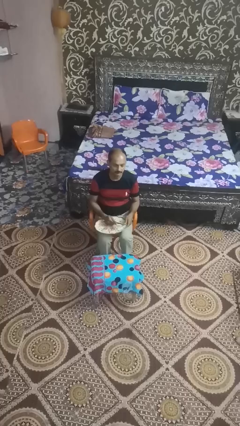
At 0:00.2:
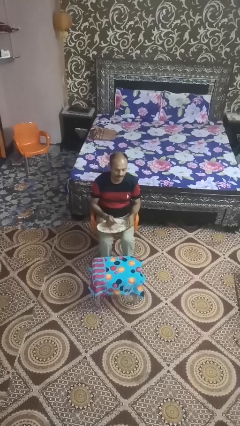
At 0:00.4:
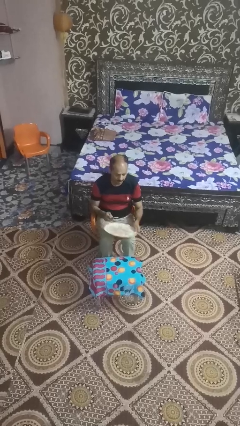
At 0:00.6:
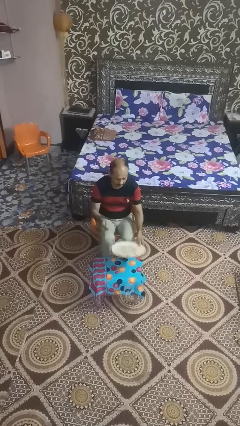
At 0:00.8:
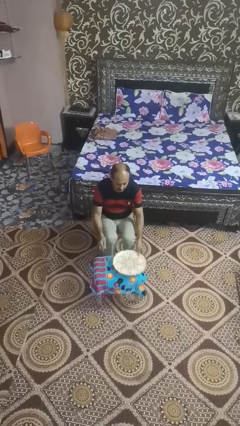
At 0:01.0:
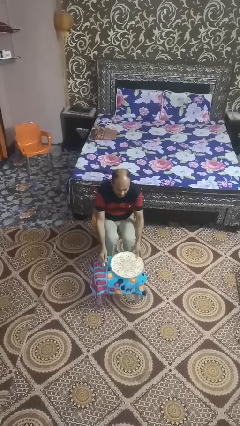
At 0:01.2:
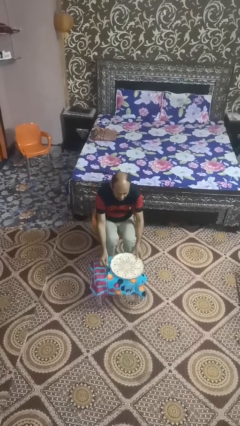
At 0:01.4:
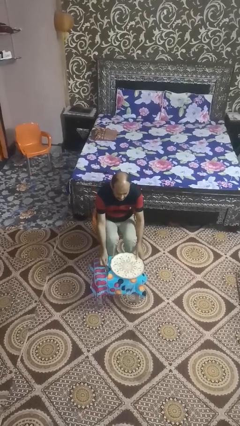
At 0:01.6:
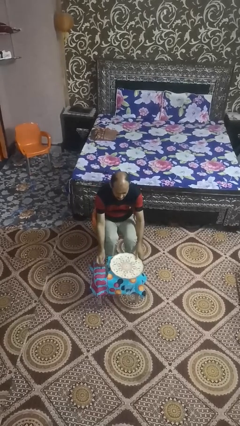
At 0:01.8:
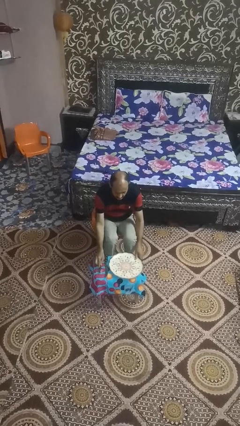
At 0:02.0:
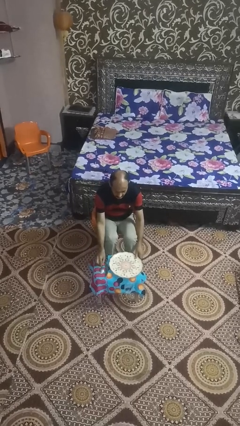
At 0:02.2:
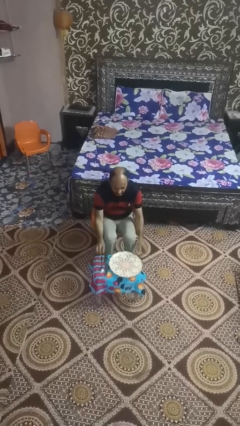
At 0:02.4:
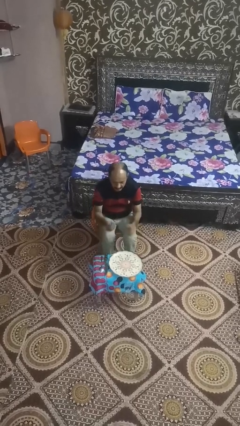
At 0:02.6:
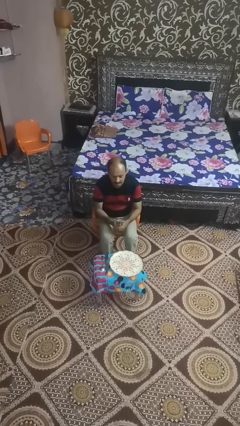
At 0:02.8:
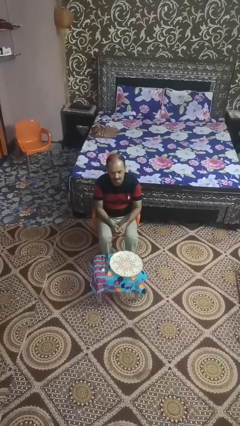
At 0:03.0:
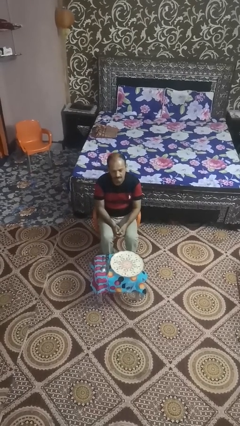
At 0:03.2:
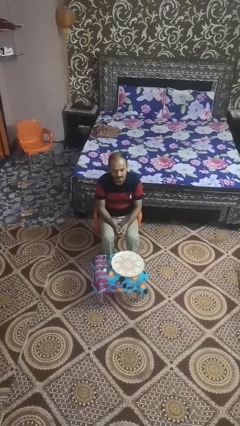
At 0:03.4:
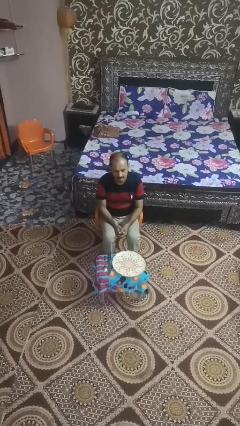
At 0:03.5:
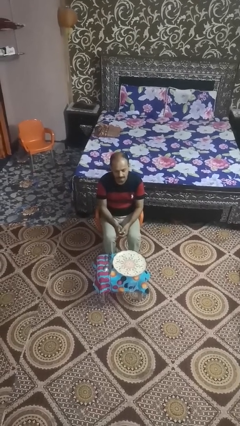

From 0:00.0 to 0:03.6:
person sets table

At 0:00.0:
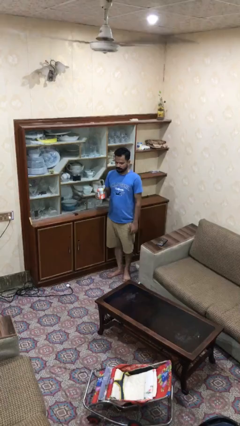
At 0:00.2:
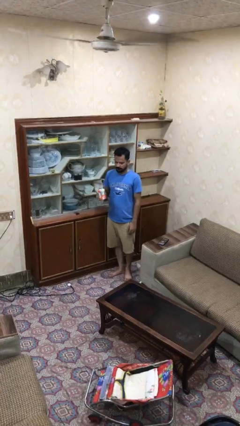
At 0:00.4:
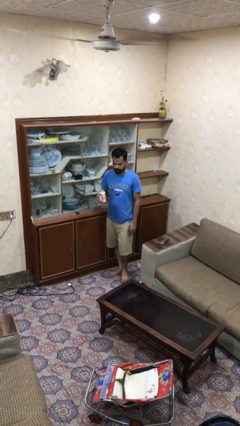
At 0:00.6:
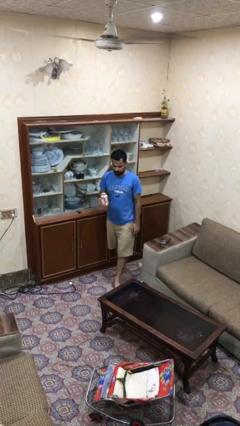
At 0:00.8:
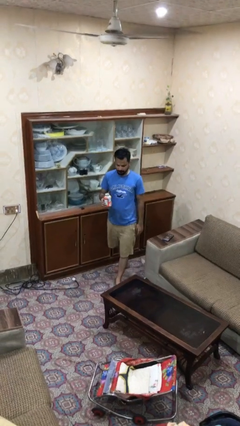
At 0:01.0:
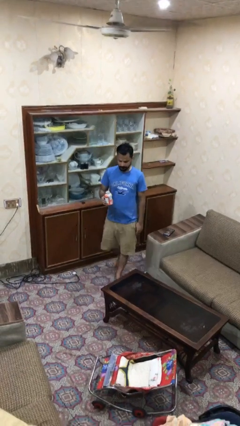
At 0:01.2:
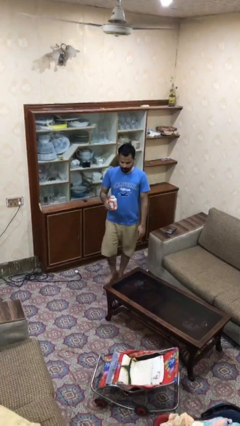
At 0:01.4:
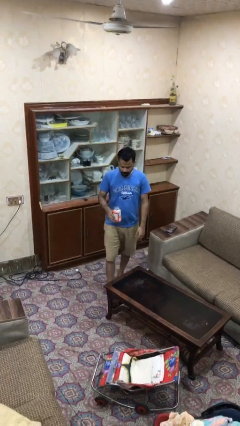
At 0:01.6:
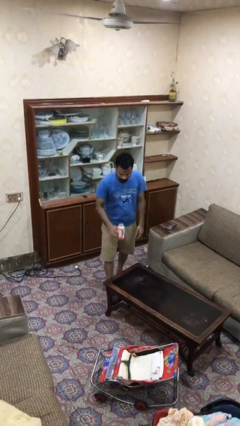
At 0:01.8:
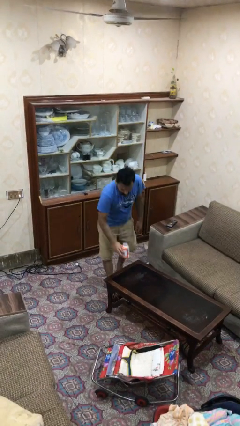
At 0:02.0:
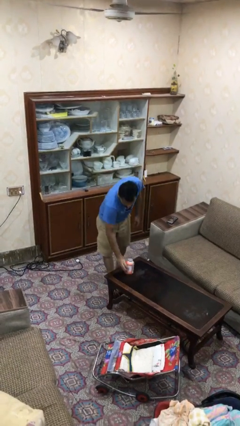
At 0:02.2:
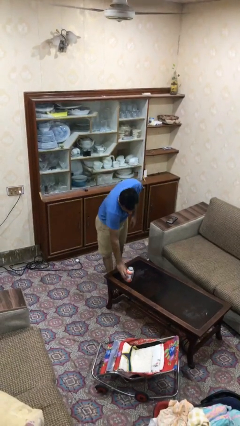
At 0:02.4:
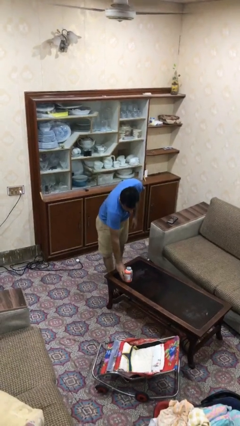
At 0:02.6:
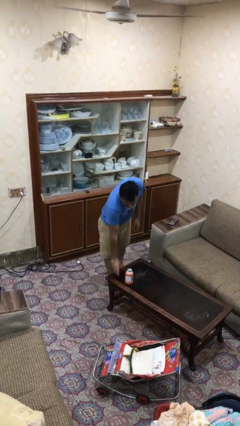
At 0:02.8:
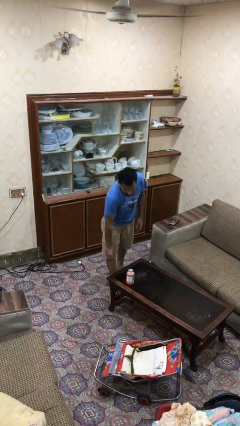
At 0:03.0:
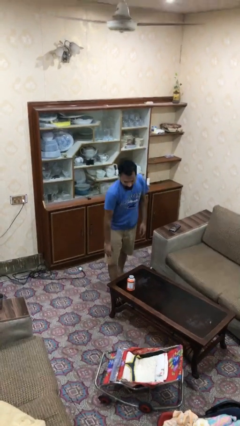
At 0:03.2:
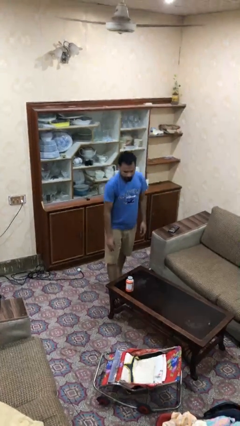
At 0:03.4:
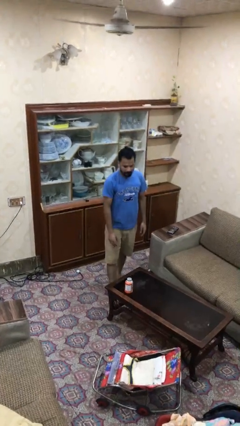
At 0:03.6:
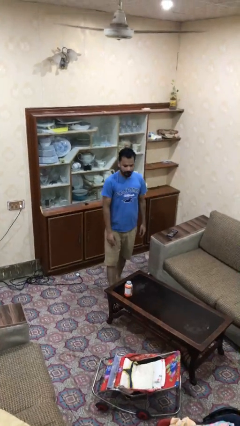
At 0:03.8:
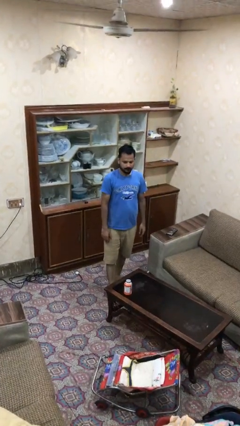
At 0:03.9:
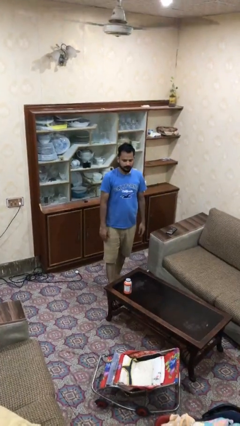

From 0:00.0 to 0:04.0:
person puts down object on table

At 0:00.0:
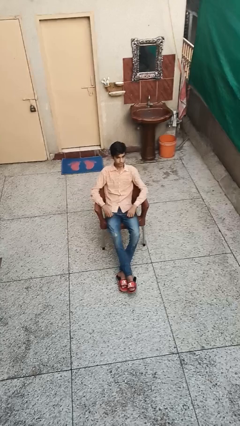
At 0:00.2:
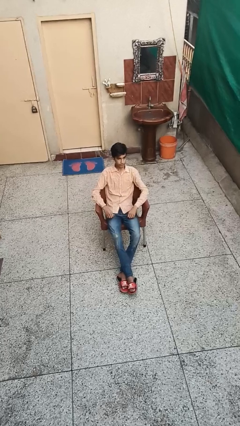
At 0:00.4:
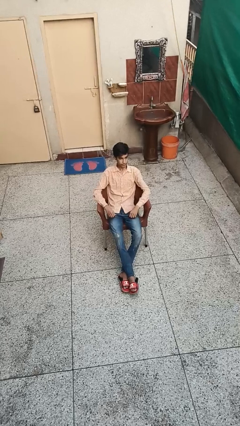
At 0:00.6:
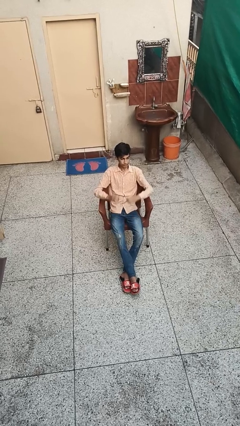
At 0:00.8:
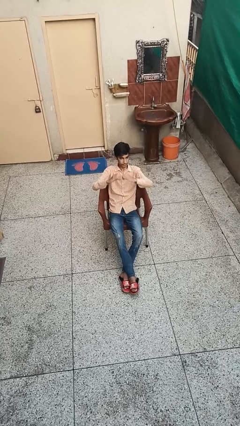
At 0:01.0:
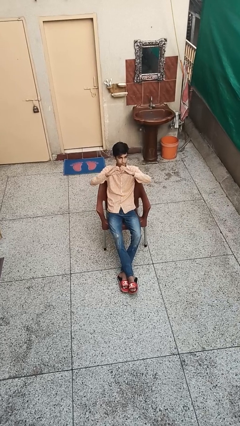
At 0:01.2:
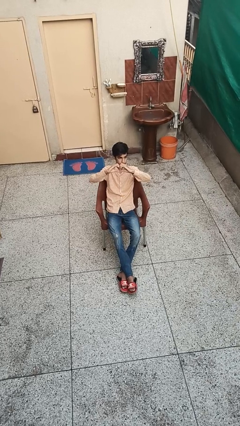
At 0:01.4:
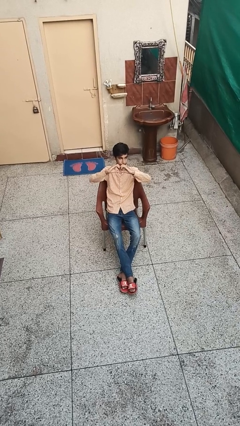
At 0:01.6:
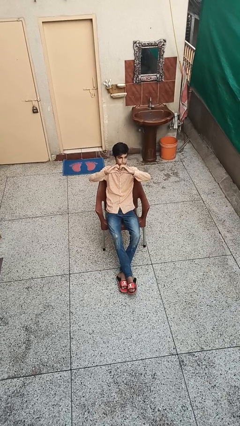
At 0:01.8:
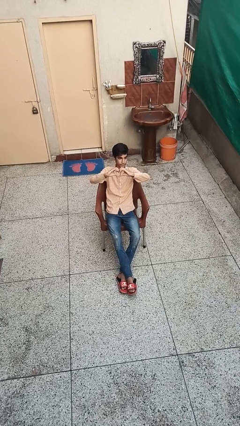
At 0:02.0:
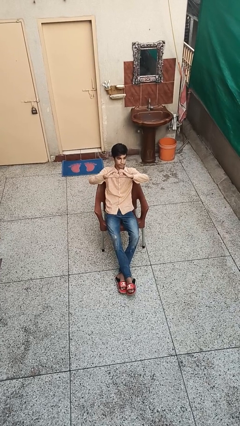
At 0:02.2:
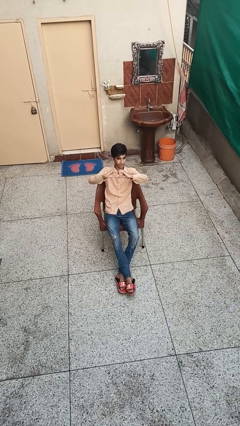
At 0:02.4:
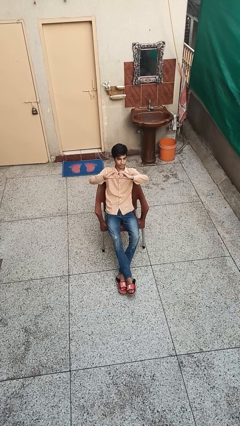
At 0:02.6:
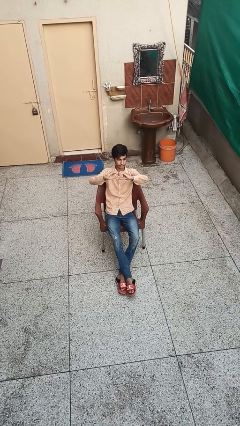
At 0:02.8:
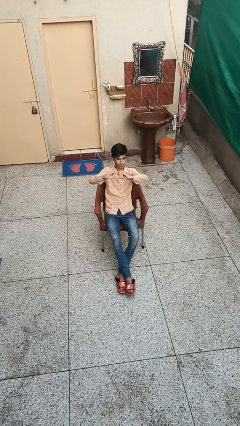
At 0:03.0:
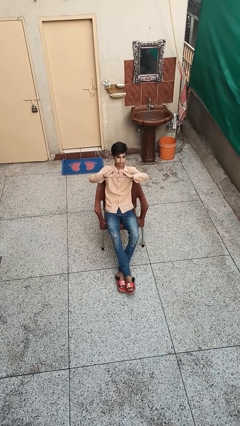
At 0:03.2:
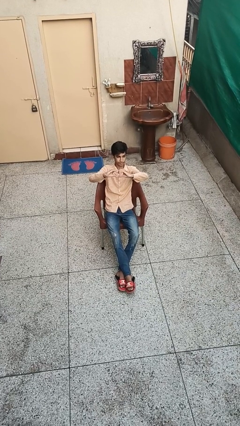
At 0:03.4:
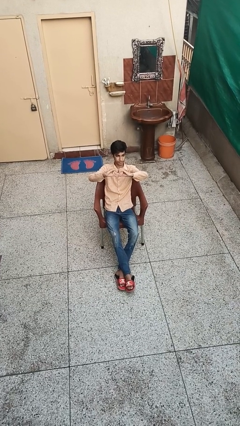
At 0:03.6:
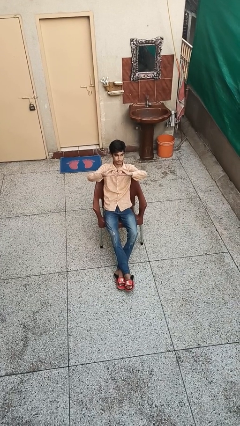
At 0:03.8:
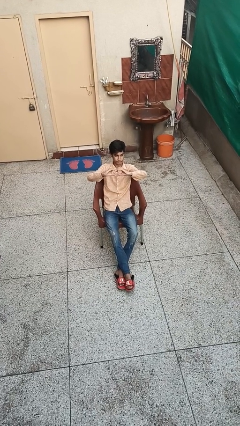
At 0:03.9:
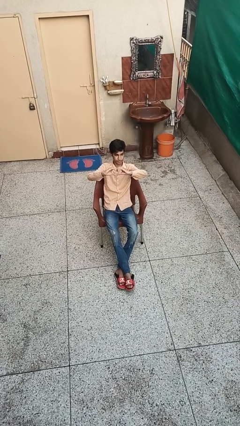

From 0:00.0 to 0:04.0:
person gestures heart

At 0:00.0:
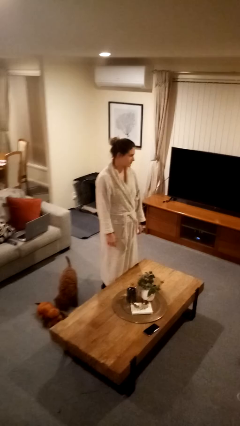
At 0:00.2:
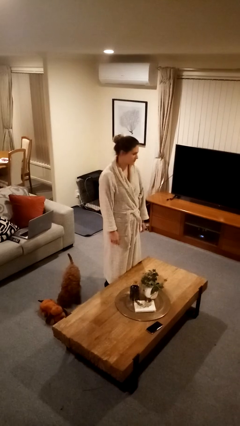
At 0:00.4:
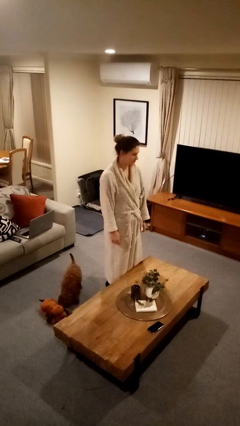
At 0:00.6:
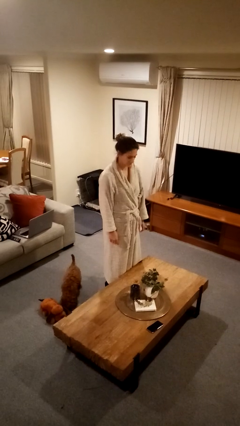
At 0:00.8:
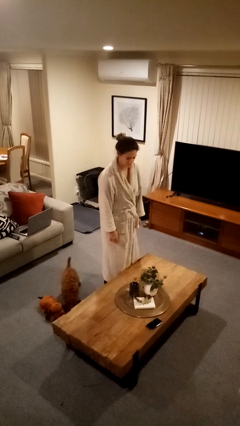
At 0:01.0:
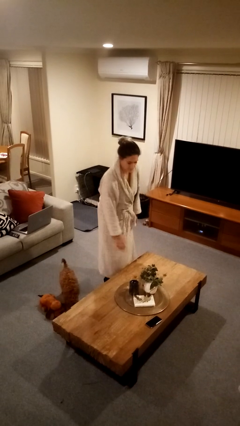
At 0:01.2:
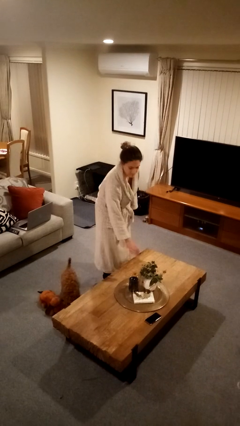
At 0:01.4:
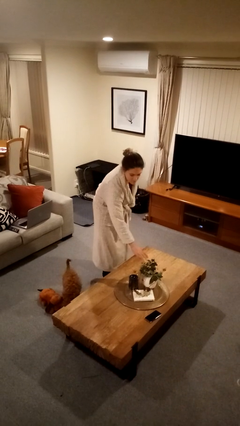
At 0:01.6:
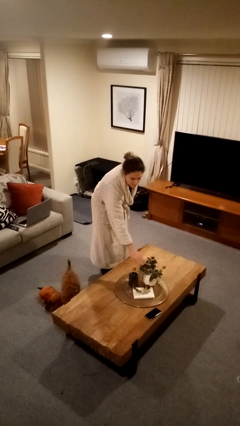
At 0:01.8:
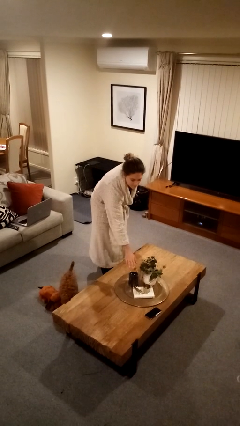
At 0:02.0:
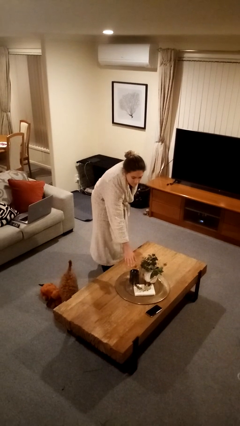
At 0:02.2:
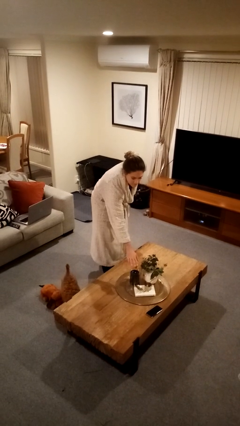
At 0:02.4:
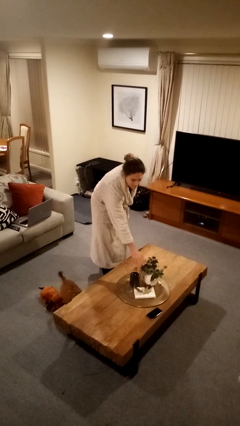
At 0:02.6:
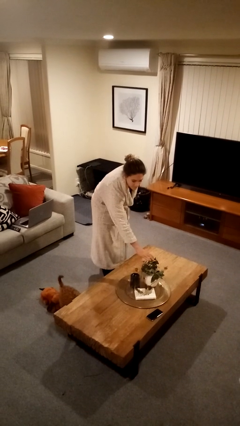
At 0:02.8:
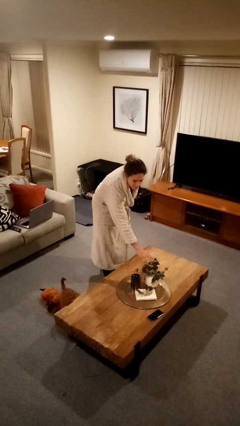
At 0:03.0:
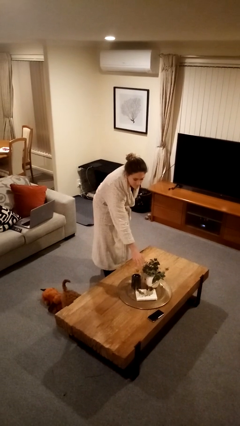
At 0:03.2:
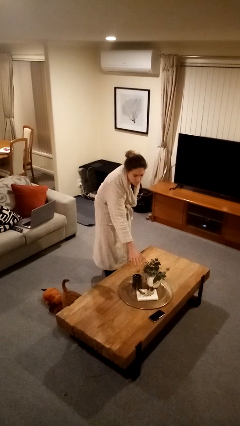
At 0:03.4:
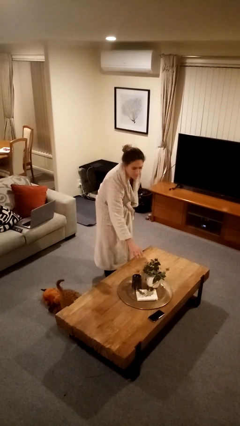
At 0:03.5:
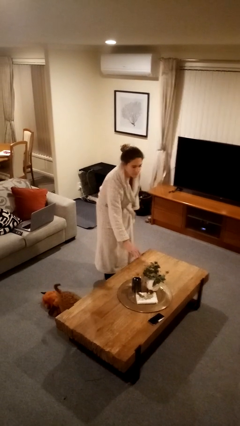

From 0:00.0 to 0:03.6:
person waves hand over object

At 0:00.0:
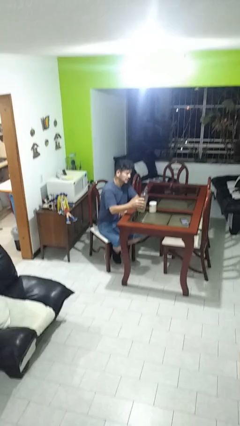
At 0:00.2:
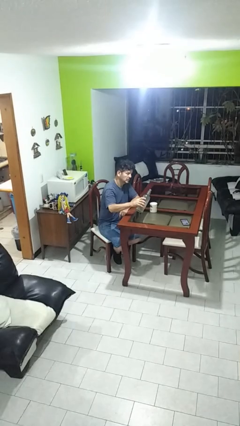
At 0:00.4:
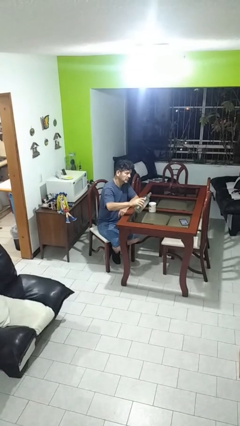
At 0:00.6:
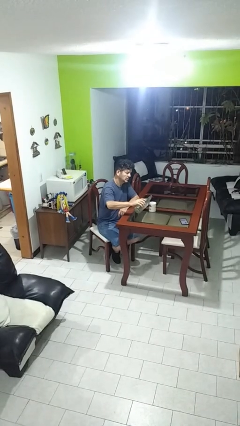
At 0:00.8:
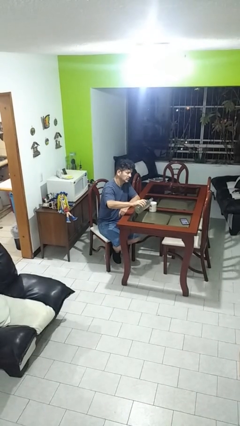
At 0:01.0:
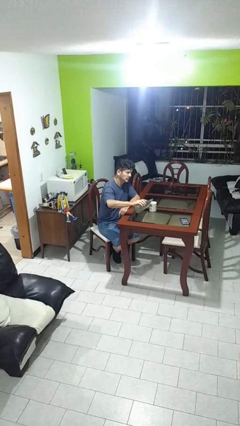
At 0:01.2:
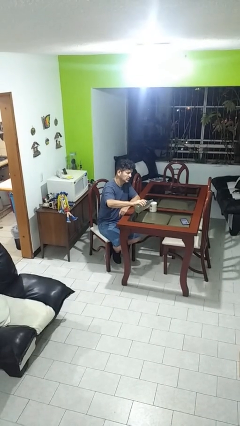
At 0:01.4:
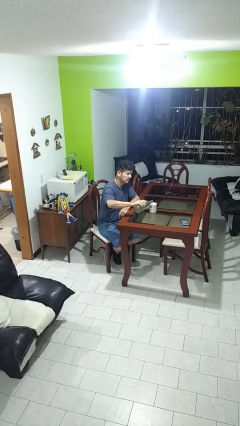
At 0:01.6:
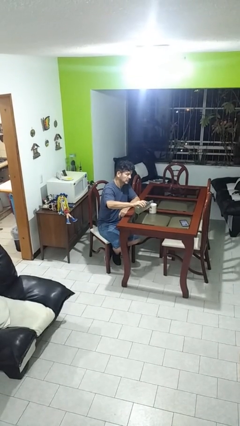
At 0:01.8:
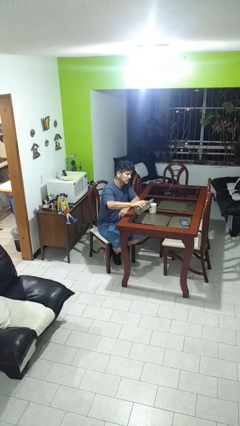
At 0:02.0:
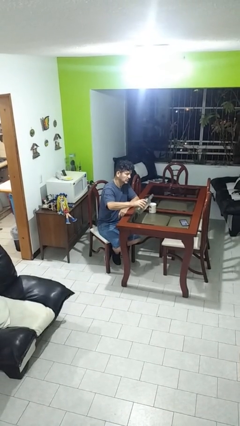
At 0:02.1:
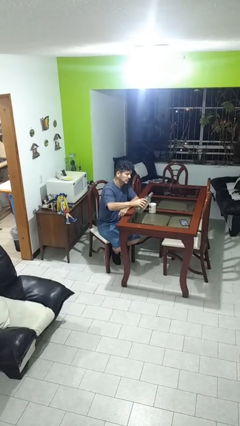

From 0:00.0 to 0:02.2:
person pours liquid into cup
